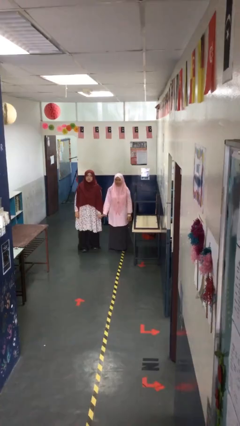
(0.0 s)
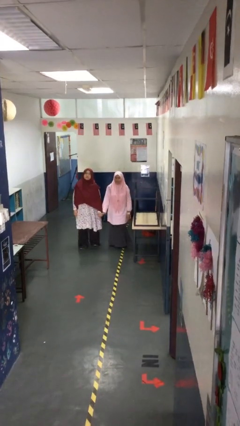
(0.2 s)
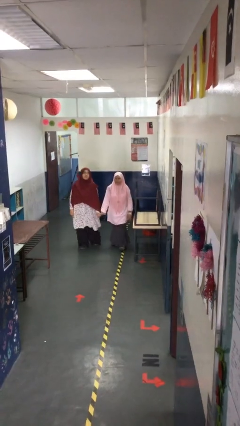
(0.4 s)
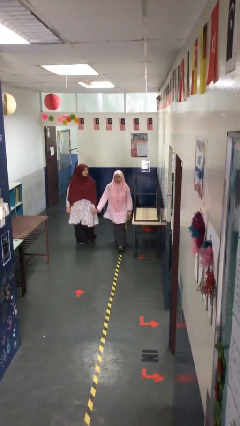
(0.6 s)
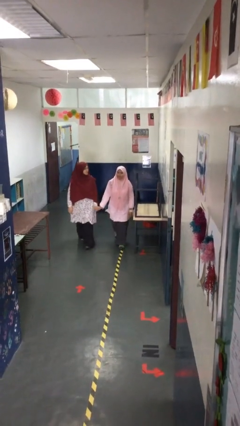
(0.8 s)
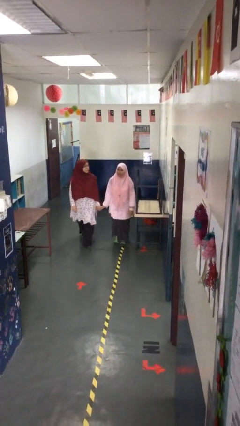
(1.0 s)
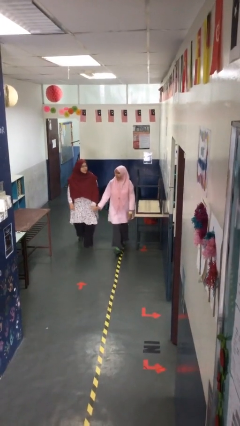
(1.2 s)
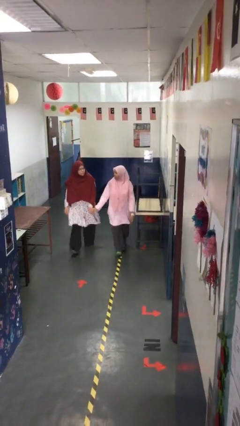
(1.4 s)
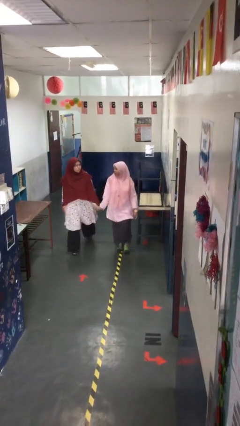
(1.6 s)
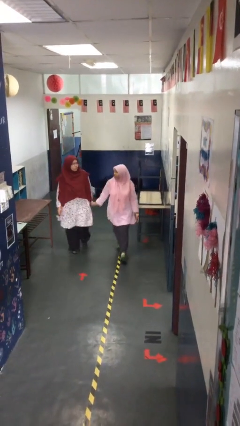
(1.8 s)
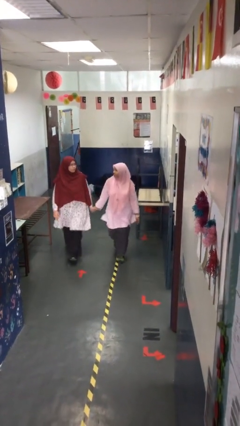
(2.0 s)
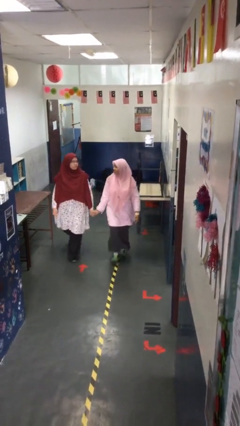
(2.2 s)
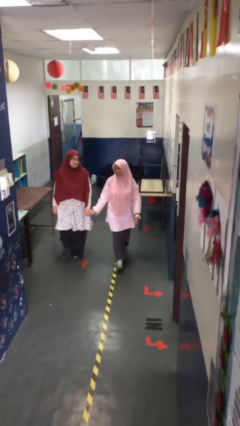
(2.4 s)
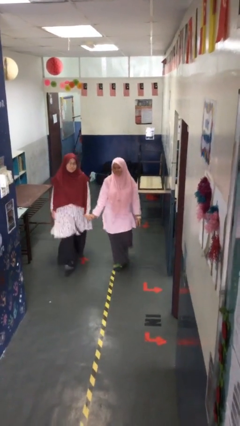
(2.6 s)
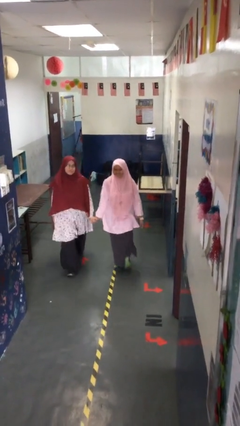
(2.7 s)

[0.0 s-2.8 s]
person holds hand

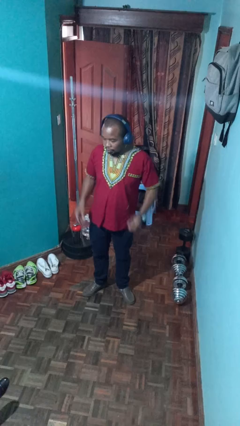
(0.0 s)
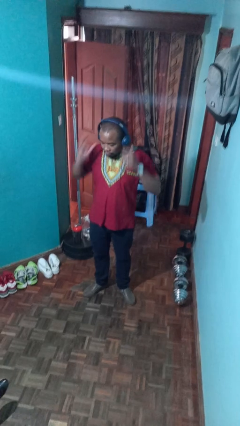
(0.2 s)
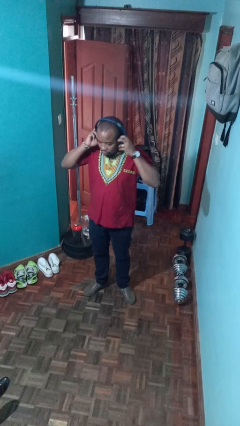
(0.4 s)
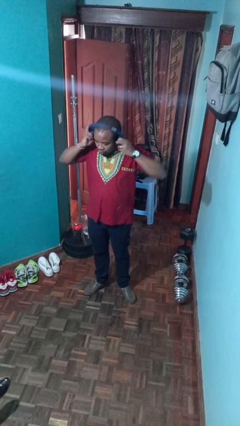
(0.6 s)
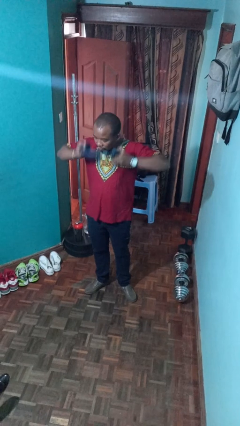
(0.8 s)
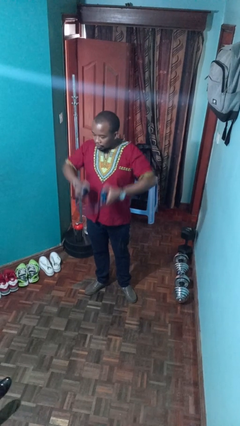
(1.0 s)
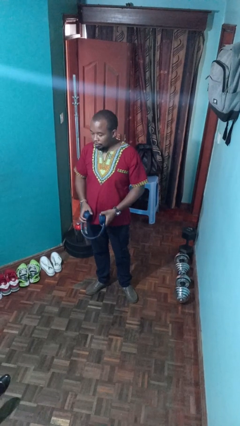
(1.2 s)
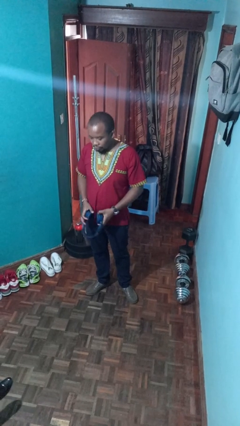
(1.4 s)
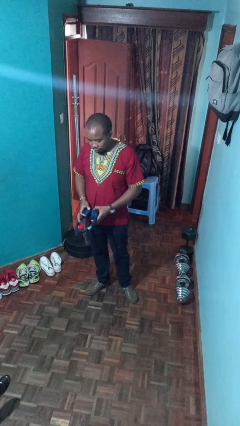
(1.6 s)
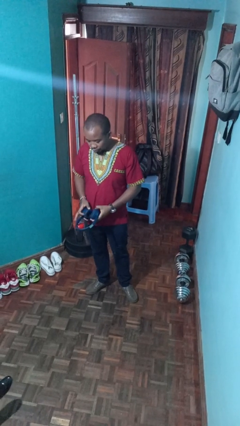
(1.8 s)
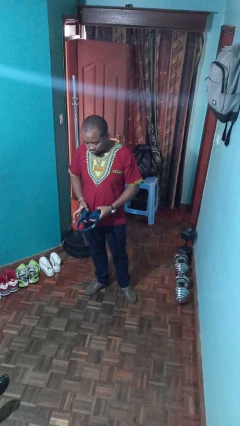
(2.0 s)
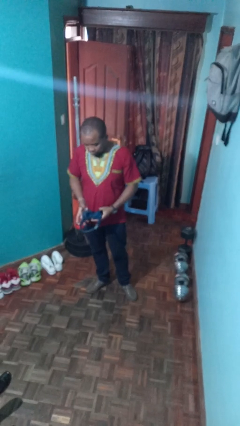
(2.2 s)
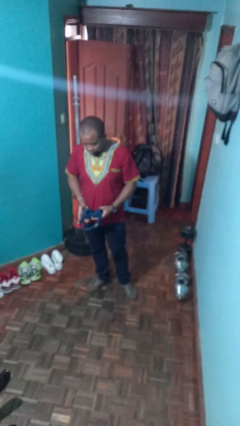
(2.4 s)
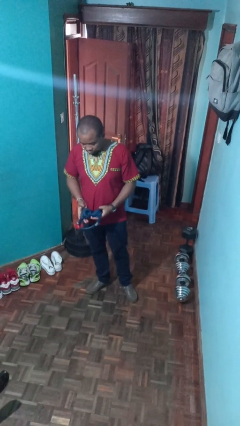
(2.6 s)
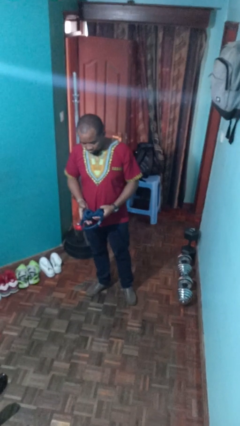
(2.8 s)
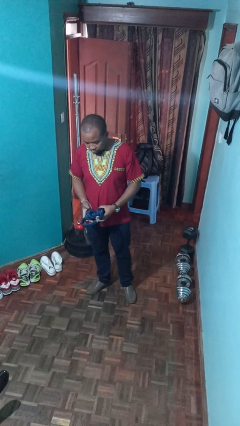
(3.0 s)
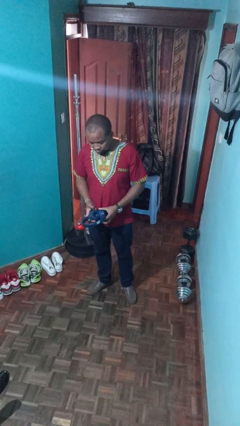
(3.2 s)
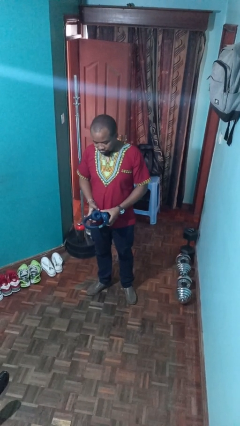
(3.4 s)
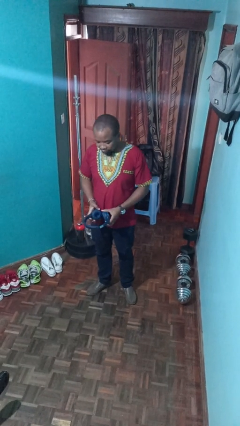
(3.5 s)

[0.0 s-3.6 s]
person takes off headphones

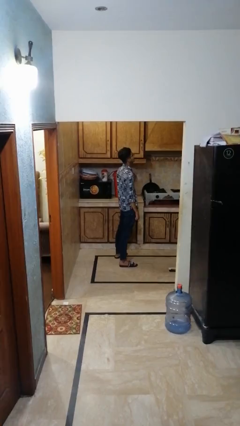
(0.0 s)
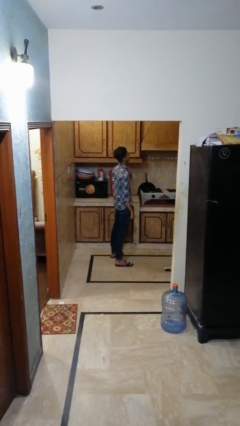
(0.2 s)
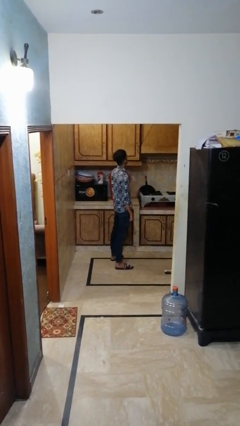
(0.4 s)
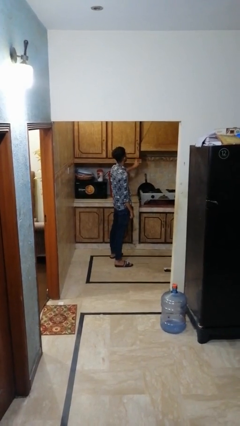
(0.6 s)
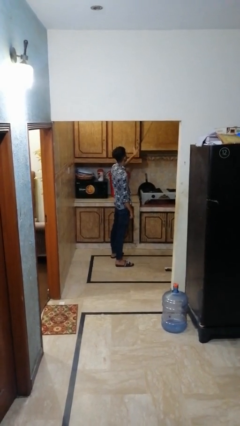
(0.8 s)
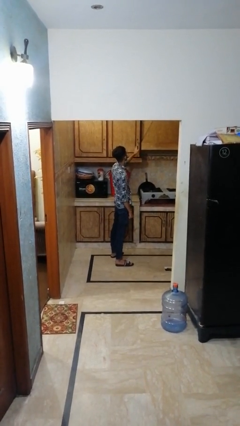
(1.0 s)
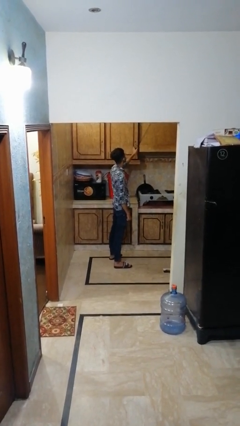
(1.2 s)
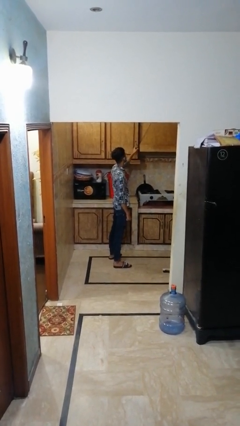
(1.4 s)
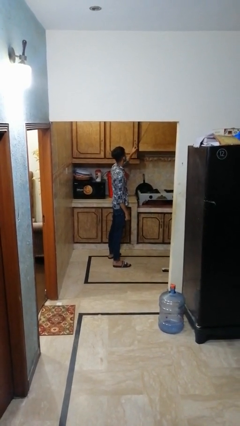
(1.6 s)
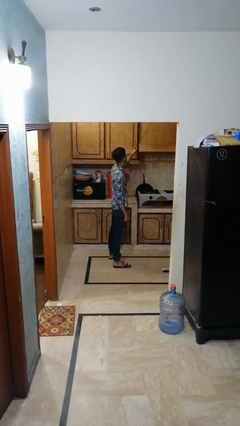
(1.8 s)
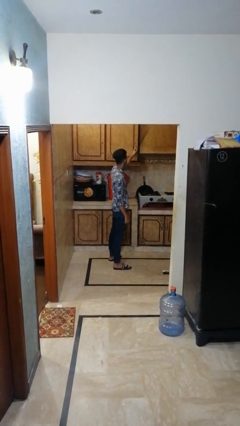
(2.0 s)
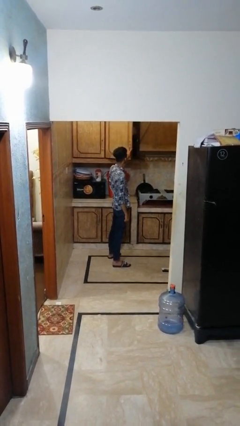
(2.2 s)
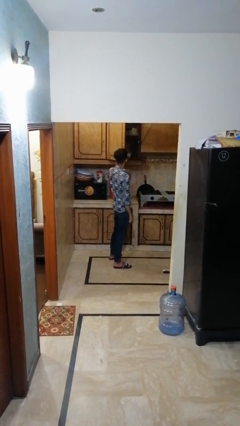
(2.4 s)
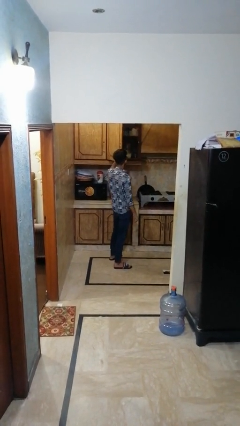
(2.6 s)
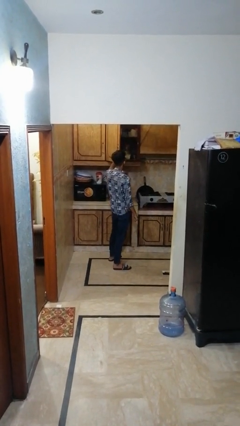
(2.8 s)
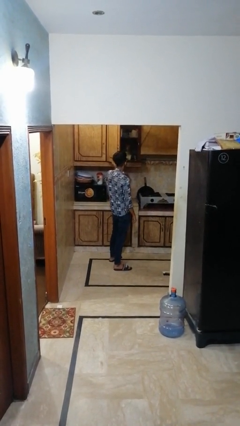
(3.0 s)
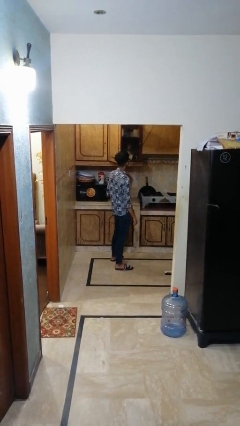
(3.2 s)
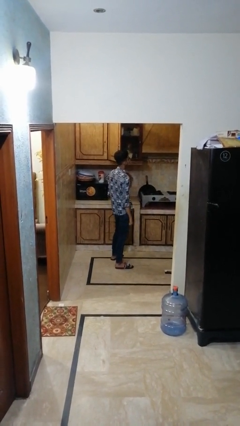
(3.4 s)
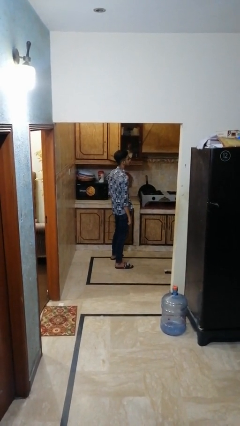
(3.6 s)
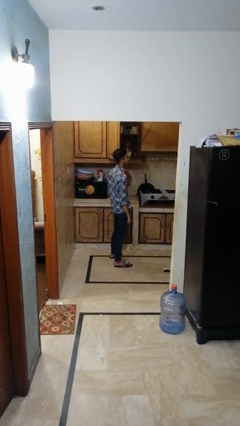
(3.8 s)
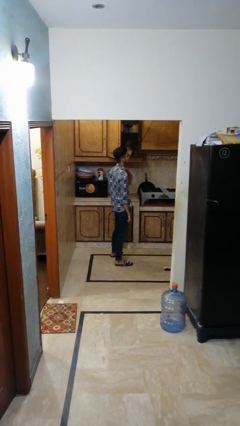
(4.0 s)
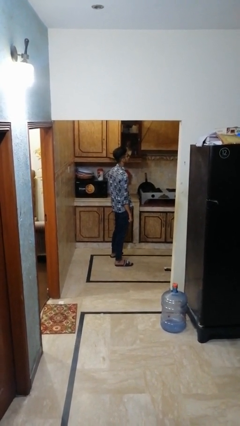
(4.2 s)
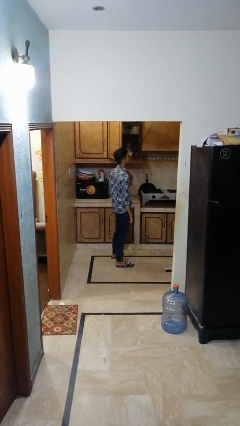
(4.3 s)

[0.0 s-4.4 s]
person opens cabinet

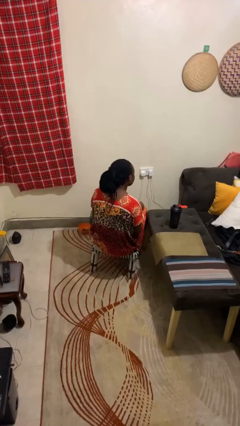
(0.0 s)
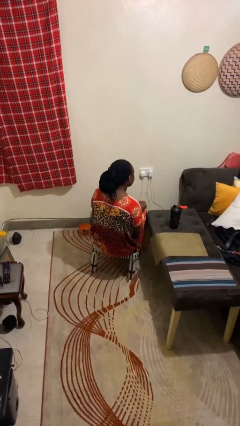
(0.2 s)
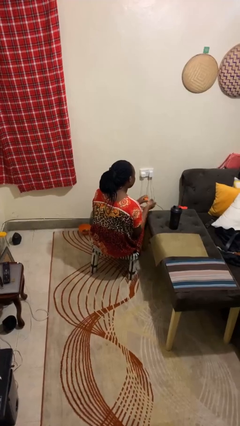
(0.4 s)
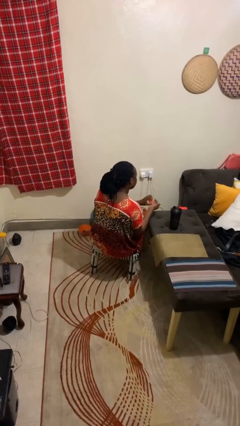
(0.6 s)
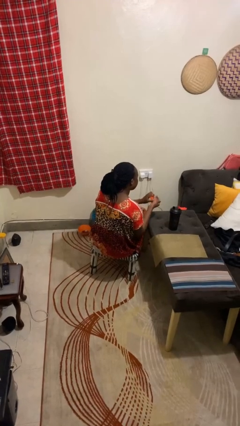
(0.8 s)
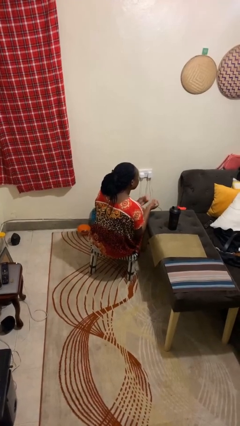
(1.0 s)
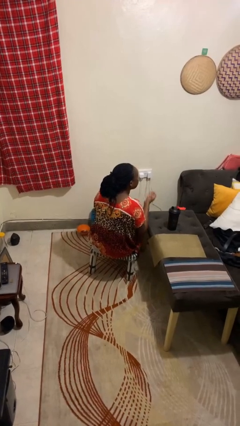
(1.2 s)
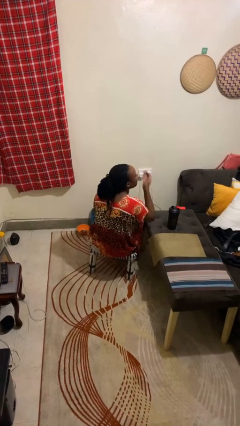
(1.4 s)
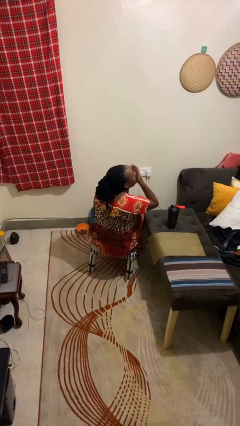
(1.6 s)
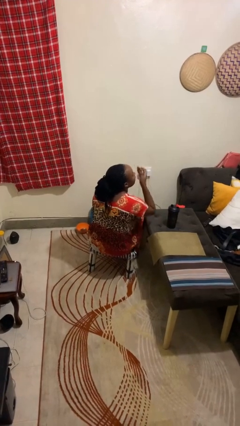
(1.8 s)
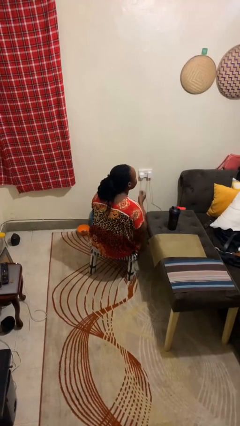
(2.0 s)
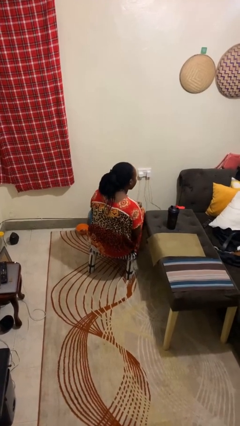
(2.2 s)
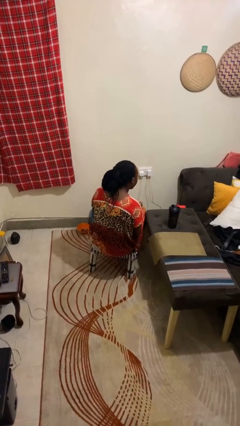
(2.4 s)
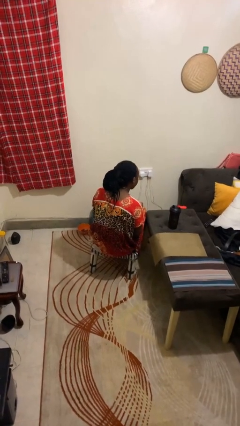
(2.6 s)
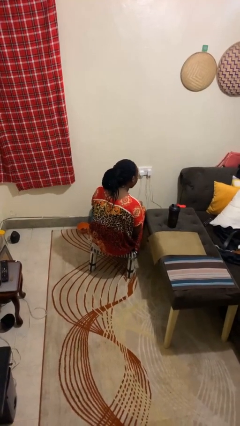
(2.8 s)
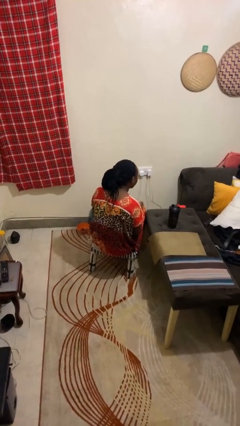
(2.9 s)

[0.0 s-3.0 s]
person takes medicine pills

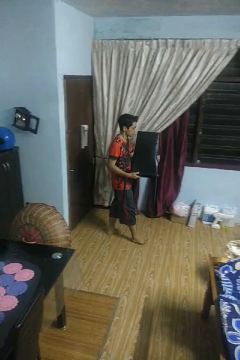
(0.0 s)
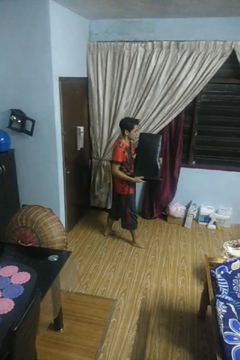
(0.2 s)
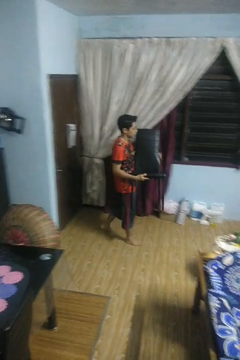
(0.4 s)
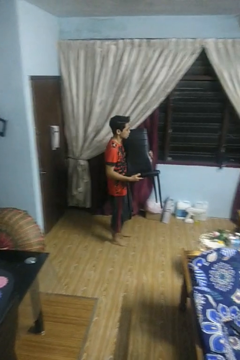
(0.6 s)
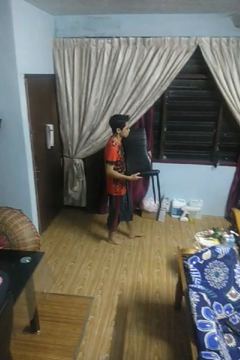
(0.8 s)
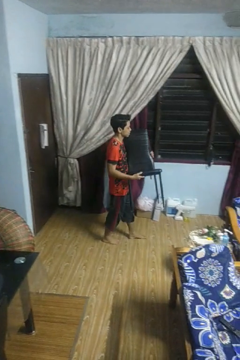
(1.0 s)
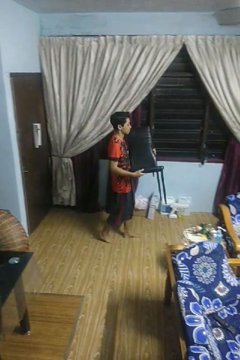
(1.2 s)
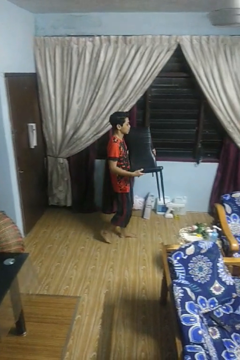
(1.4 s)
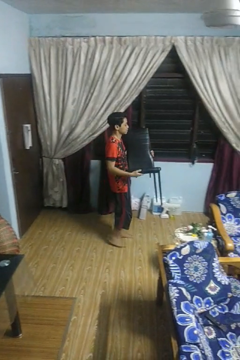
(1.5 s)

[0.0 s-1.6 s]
person carries furniture

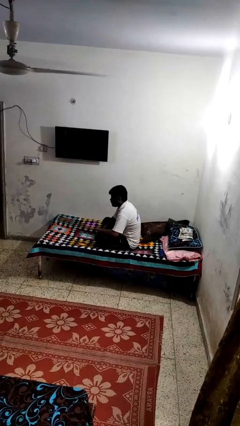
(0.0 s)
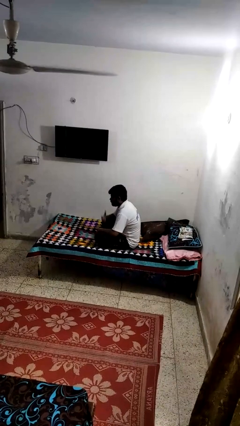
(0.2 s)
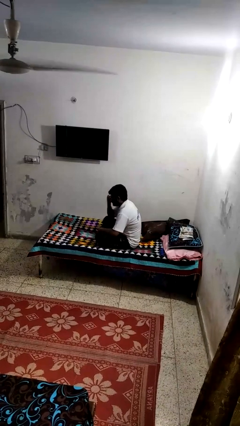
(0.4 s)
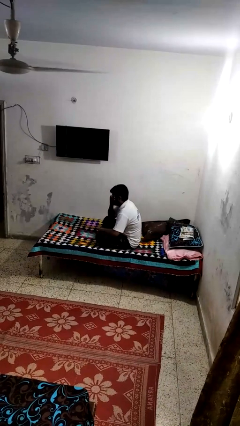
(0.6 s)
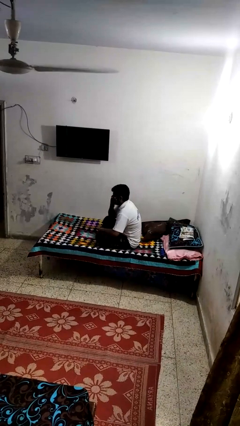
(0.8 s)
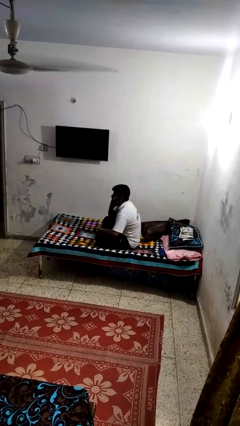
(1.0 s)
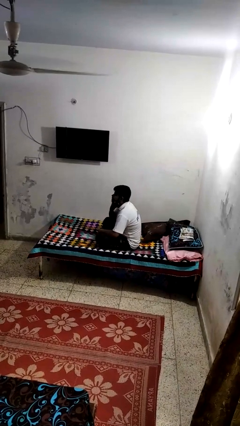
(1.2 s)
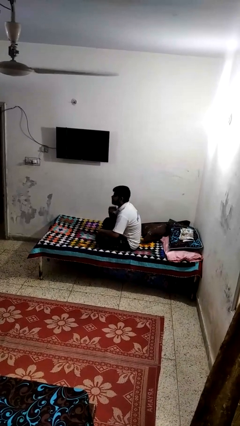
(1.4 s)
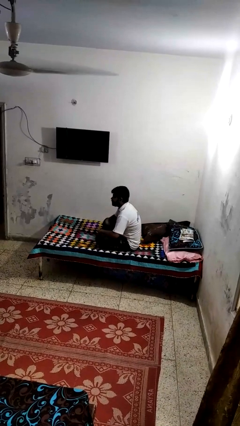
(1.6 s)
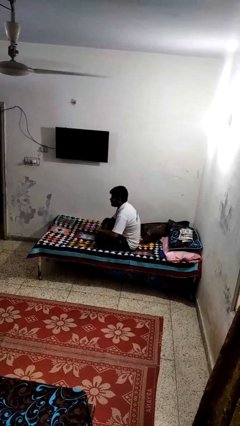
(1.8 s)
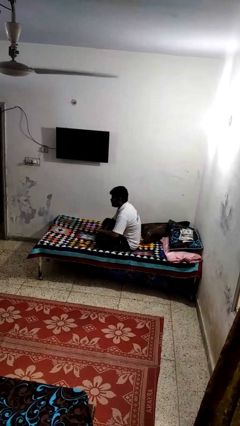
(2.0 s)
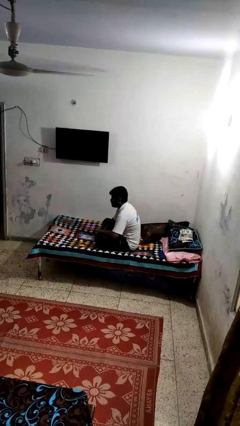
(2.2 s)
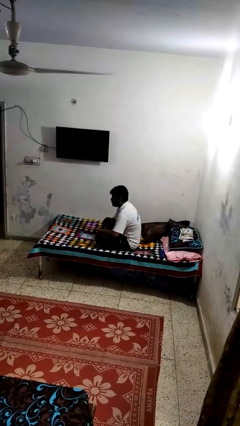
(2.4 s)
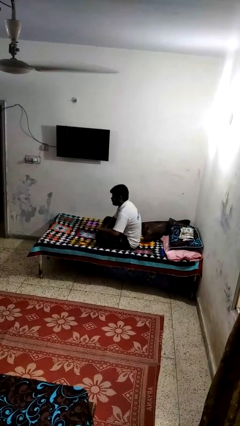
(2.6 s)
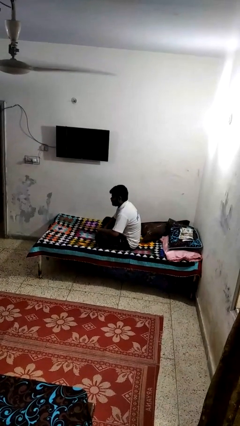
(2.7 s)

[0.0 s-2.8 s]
person scratches face
